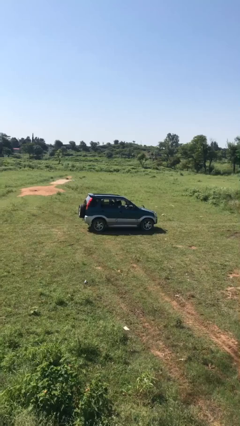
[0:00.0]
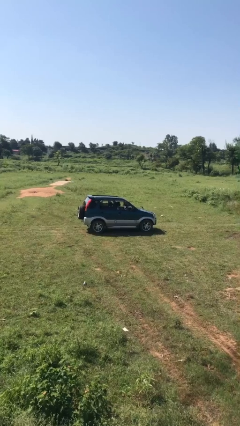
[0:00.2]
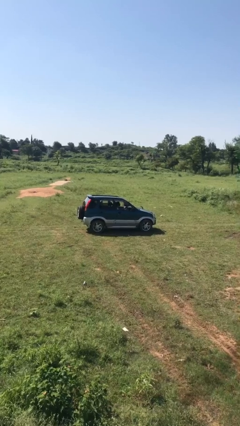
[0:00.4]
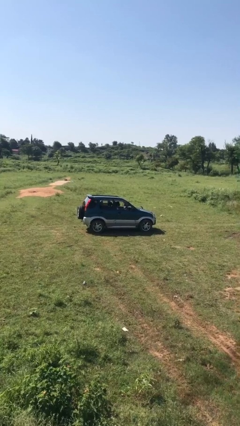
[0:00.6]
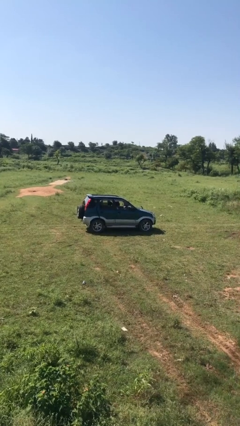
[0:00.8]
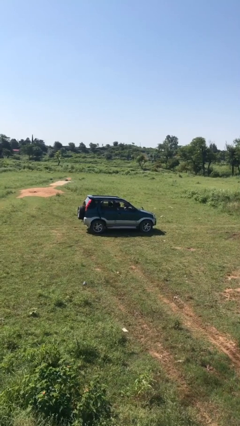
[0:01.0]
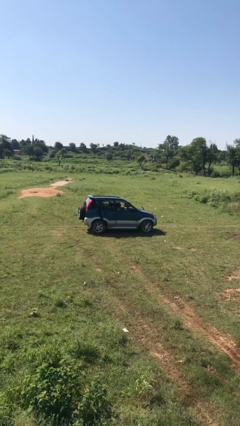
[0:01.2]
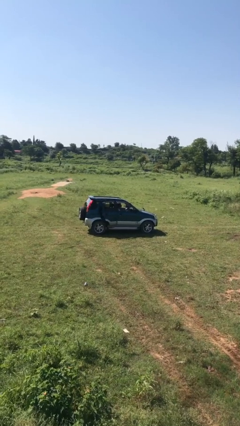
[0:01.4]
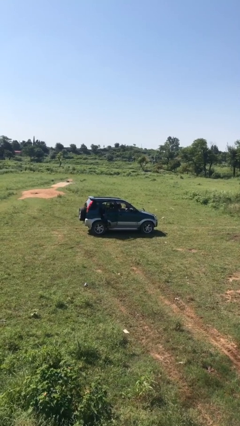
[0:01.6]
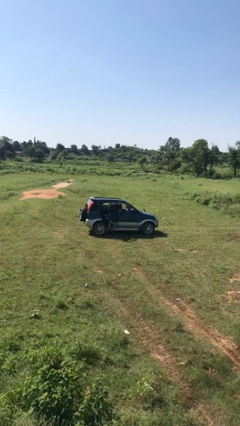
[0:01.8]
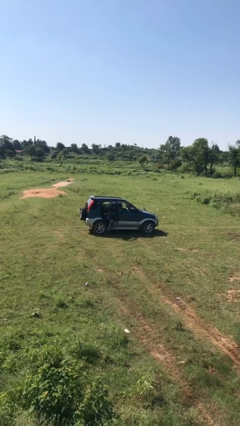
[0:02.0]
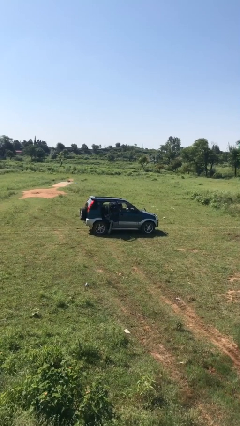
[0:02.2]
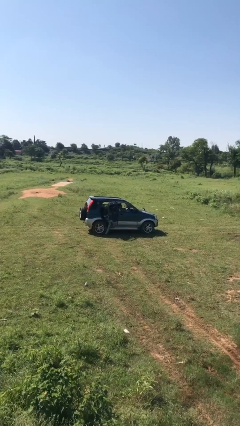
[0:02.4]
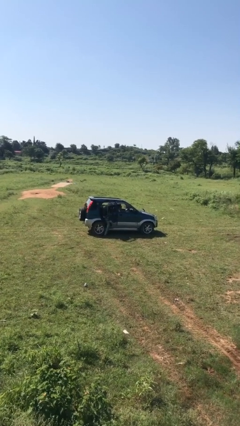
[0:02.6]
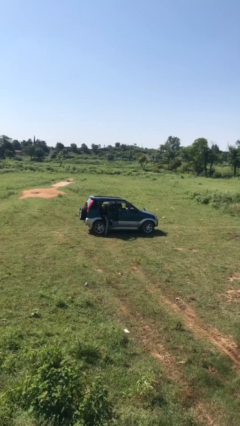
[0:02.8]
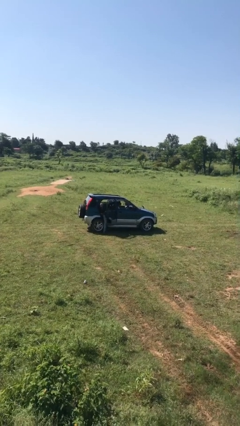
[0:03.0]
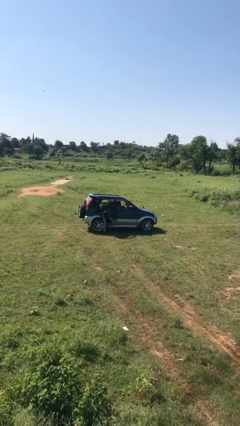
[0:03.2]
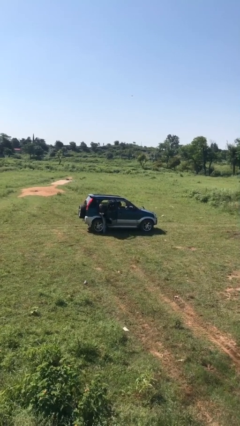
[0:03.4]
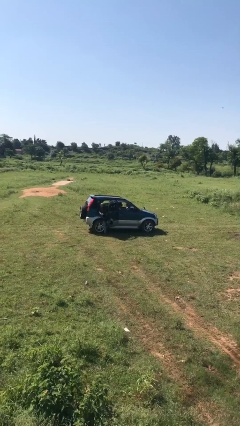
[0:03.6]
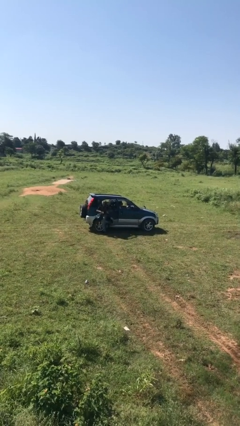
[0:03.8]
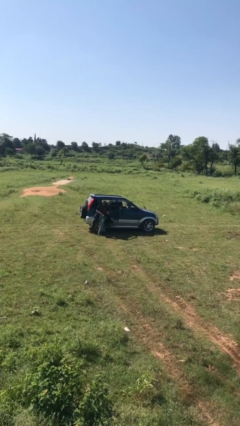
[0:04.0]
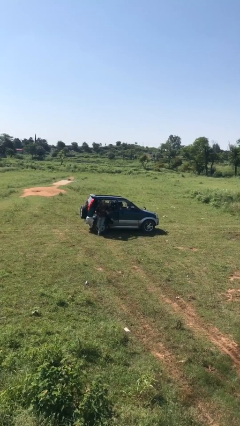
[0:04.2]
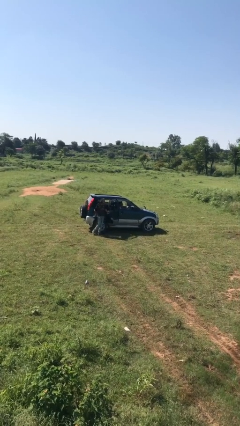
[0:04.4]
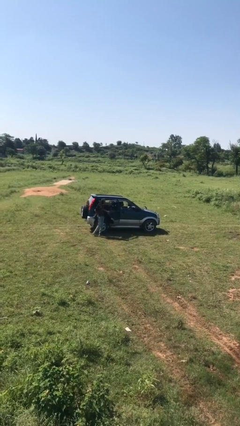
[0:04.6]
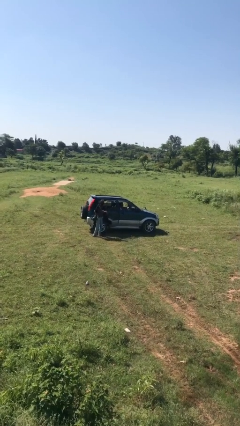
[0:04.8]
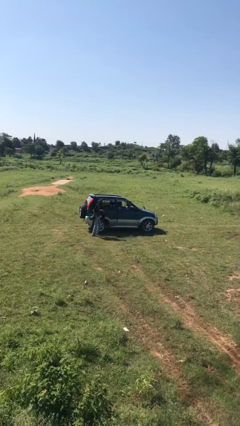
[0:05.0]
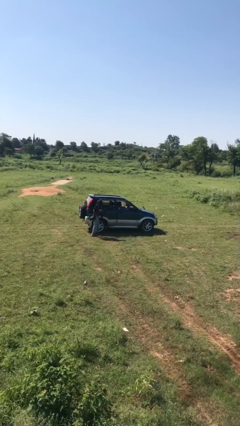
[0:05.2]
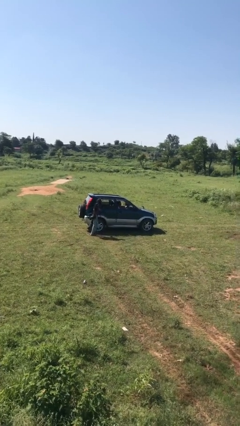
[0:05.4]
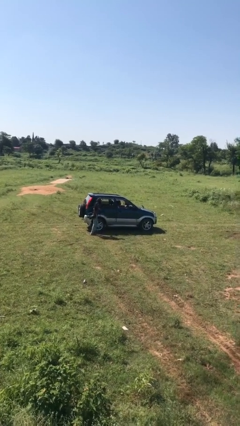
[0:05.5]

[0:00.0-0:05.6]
car drops off person

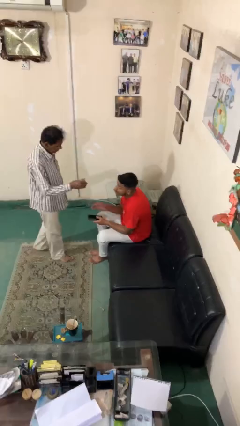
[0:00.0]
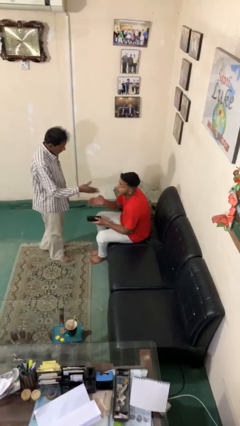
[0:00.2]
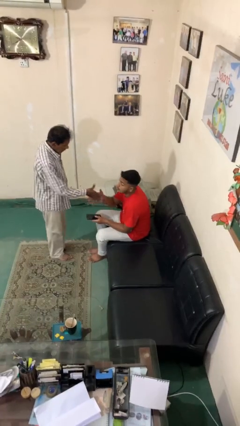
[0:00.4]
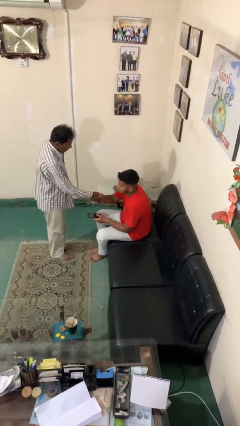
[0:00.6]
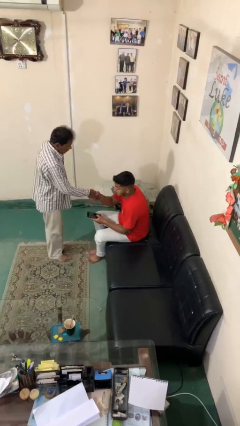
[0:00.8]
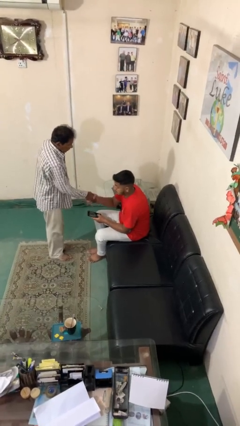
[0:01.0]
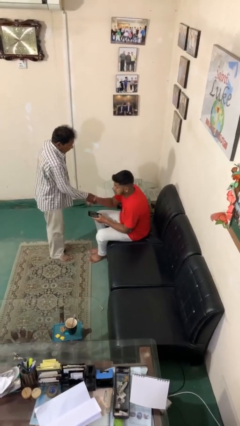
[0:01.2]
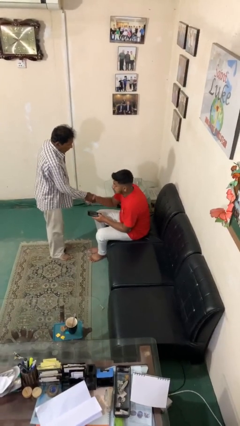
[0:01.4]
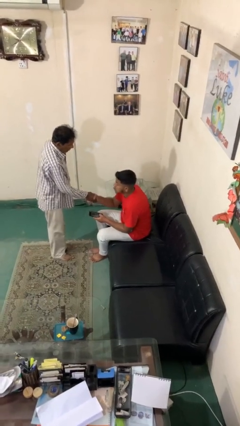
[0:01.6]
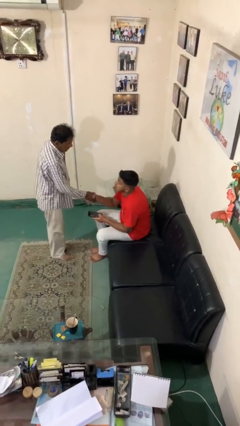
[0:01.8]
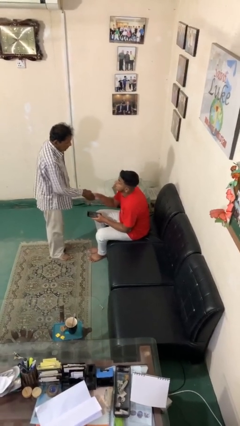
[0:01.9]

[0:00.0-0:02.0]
person shakes hand

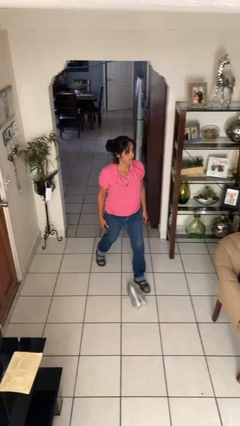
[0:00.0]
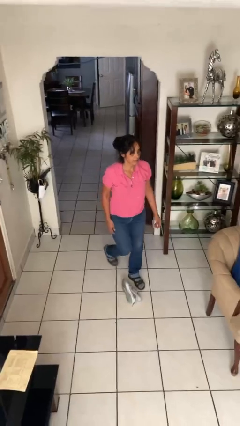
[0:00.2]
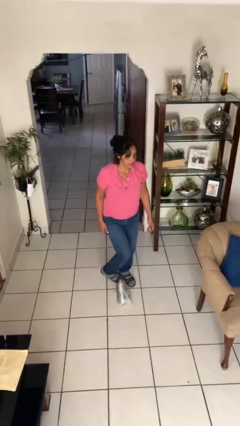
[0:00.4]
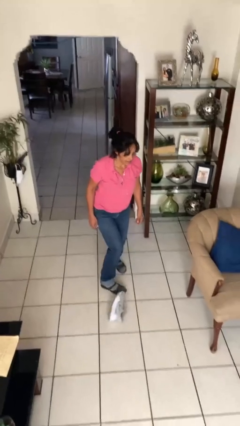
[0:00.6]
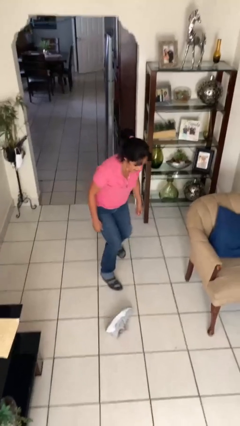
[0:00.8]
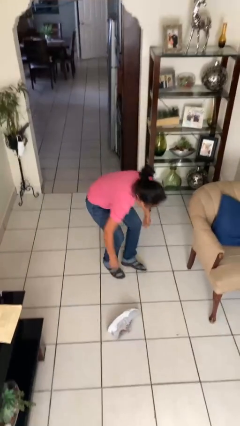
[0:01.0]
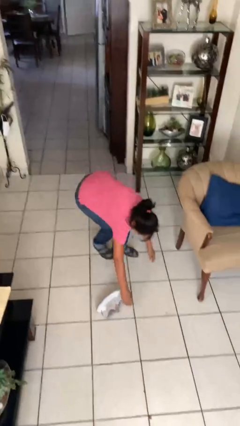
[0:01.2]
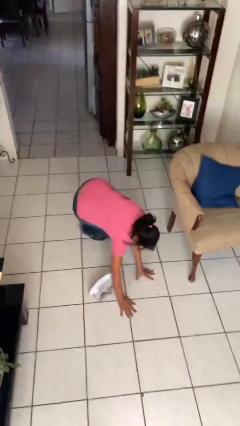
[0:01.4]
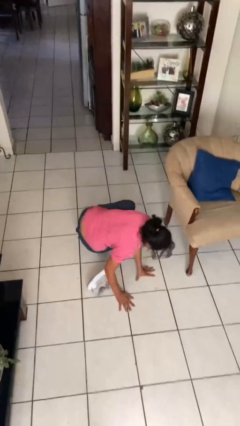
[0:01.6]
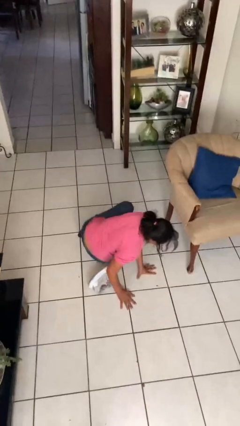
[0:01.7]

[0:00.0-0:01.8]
person trips on object on floor

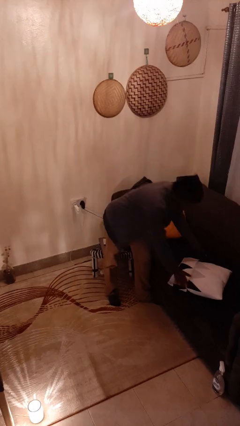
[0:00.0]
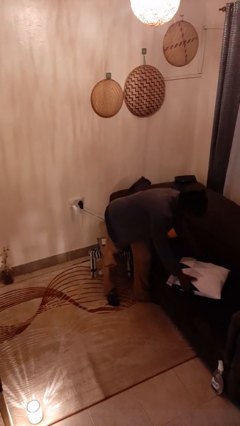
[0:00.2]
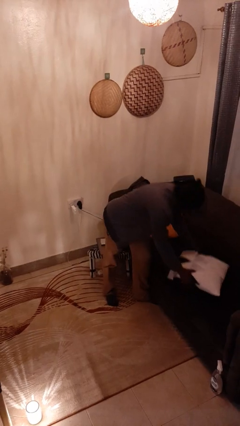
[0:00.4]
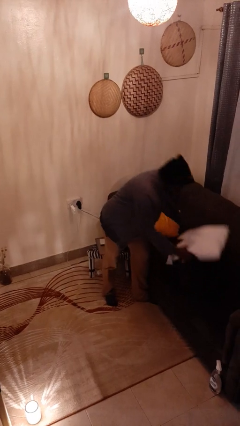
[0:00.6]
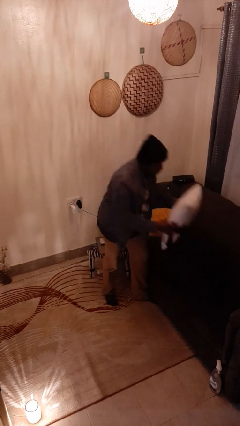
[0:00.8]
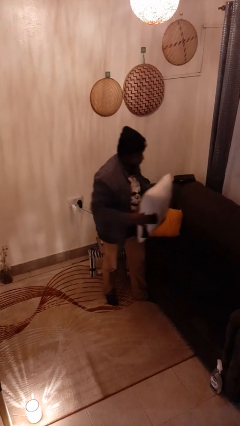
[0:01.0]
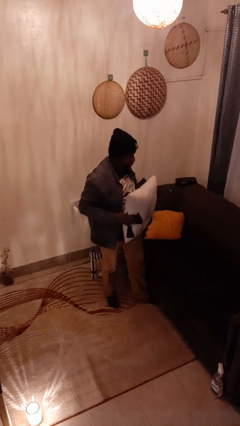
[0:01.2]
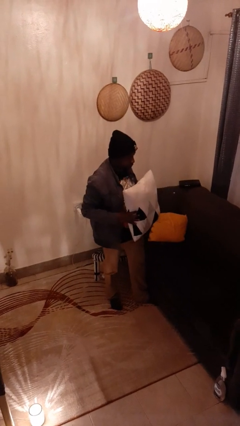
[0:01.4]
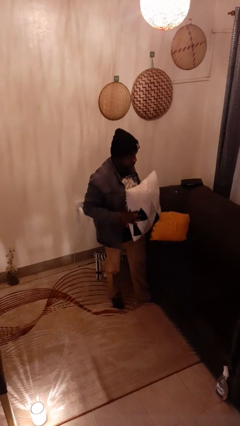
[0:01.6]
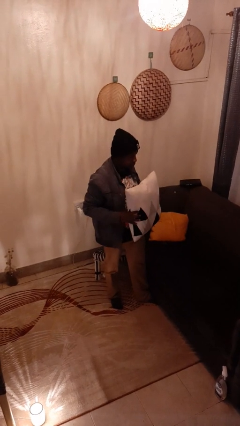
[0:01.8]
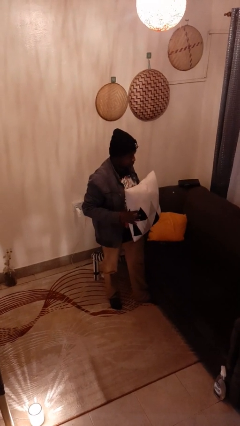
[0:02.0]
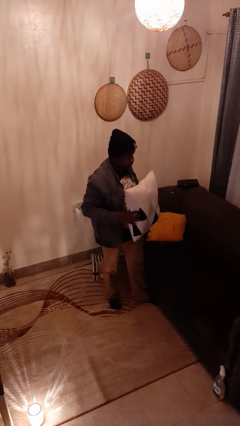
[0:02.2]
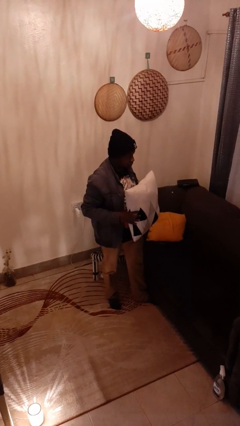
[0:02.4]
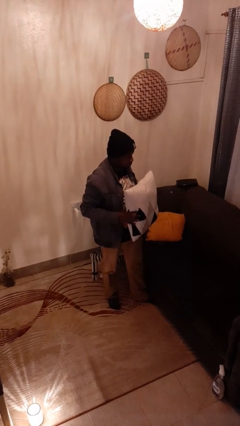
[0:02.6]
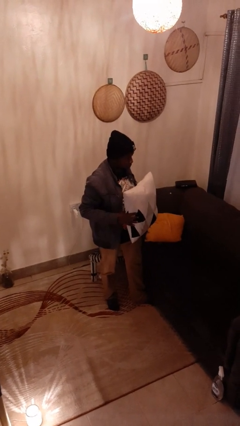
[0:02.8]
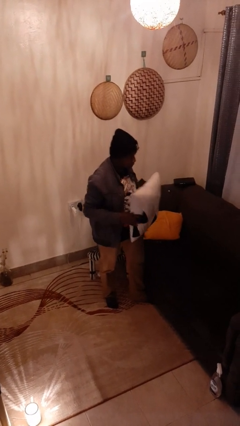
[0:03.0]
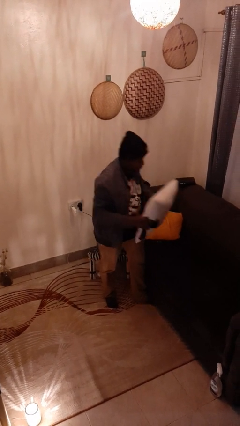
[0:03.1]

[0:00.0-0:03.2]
person picks up object from couch

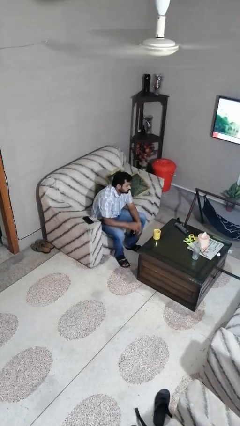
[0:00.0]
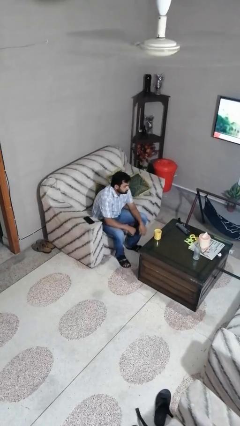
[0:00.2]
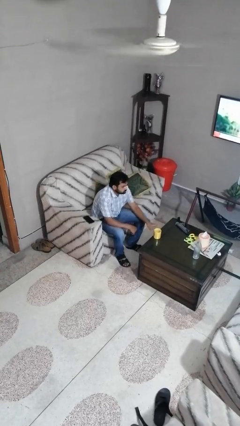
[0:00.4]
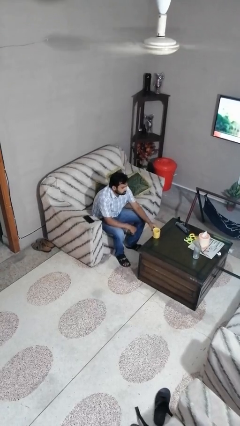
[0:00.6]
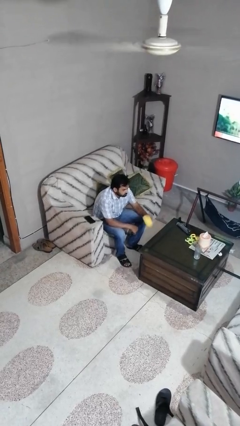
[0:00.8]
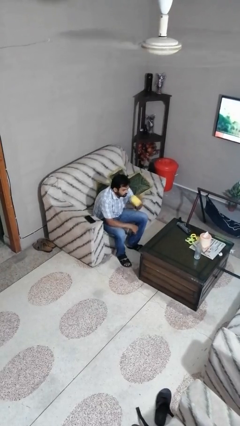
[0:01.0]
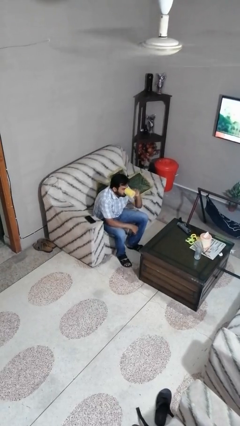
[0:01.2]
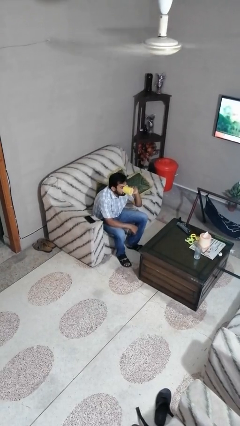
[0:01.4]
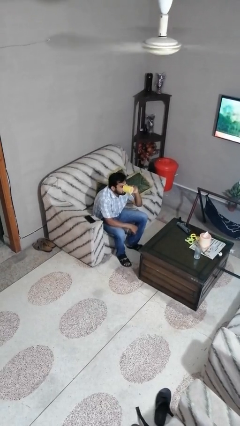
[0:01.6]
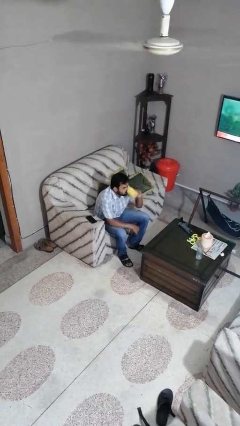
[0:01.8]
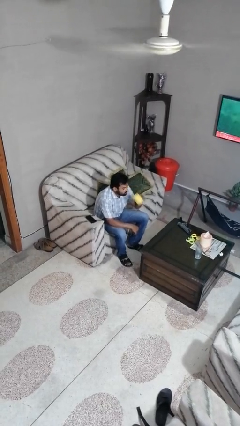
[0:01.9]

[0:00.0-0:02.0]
person drinks from mug

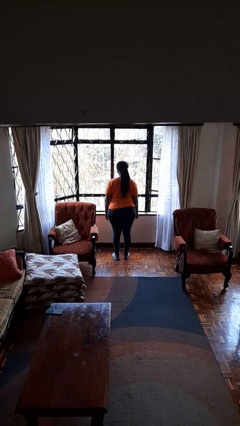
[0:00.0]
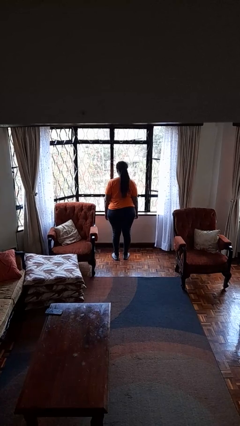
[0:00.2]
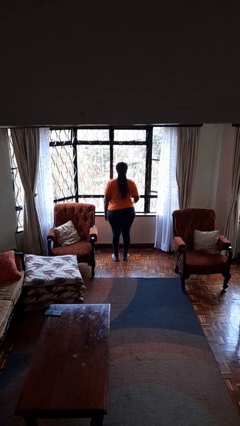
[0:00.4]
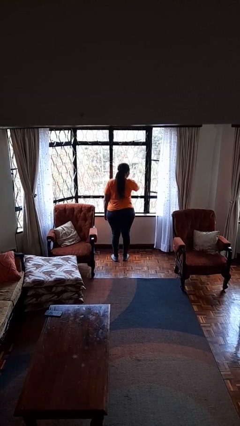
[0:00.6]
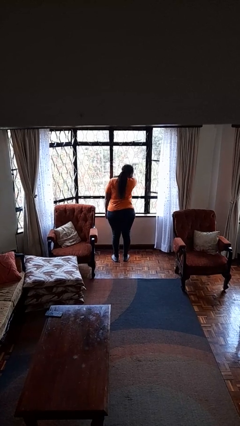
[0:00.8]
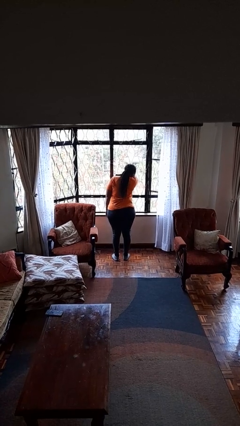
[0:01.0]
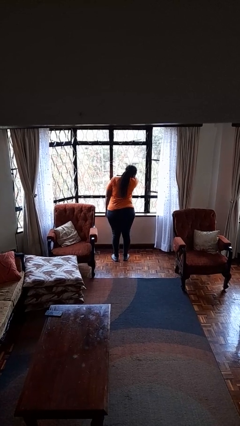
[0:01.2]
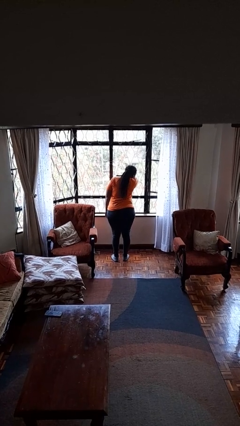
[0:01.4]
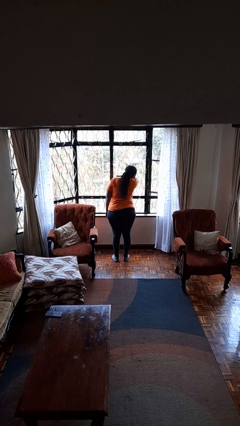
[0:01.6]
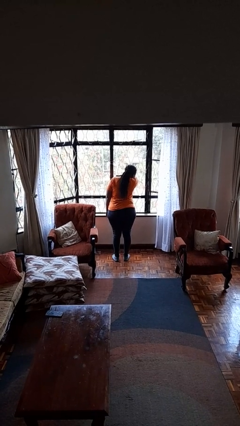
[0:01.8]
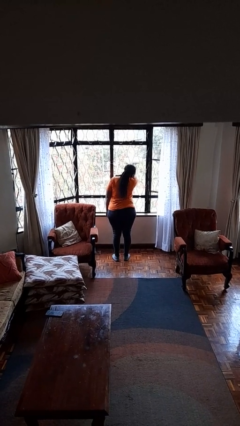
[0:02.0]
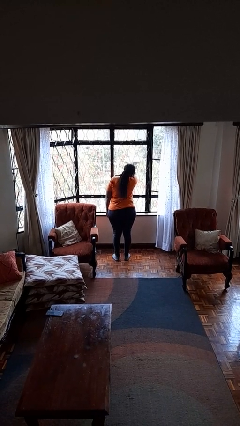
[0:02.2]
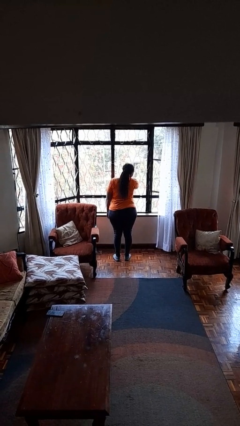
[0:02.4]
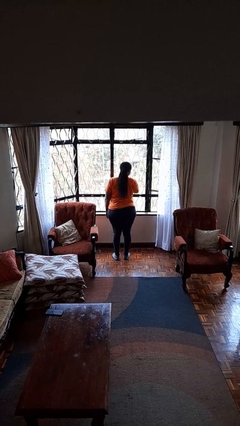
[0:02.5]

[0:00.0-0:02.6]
person sneezes into arm

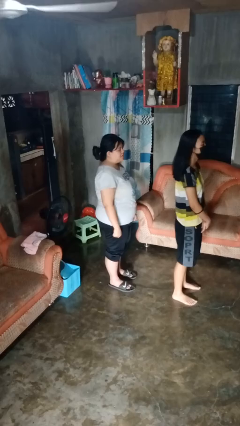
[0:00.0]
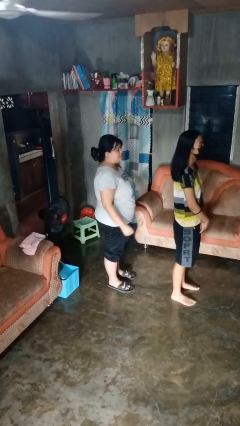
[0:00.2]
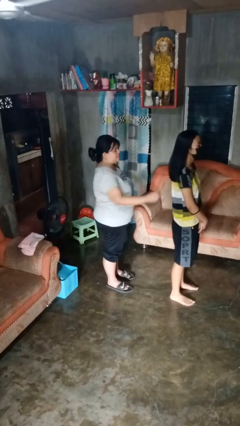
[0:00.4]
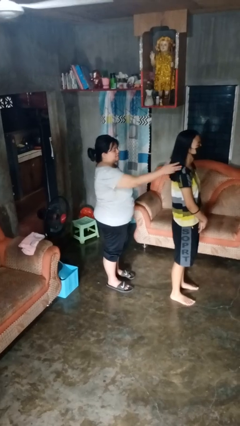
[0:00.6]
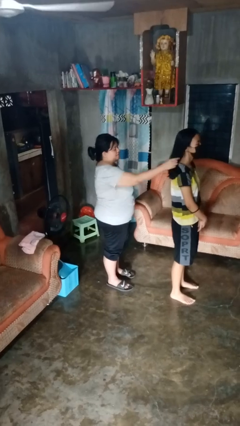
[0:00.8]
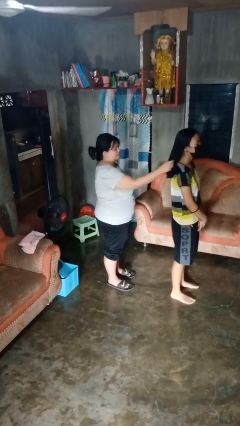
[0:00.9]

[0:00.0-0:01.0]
person grabs person by hair
